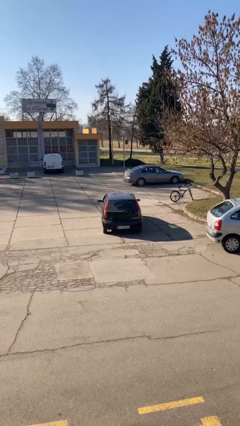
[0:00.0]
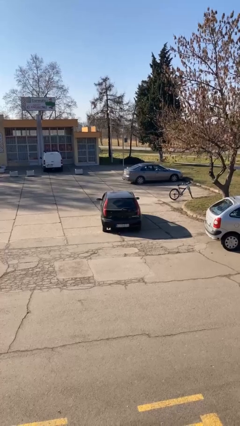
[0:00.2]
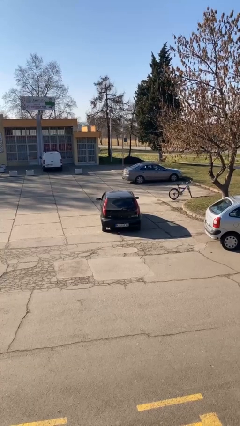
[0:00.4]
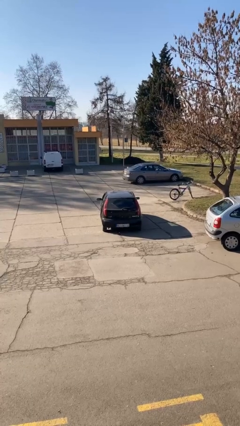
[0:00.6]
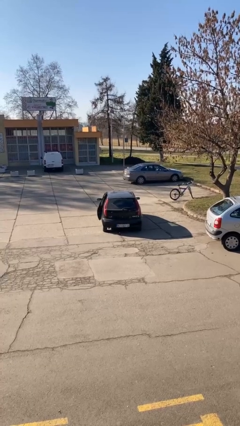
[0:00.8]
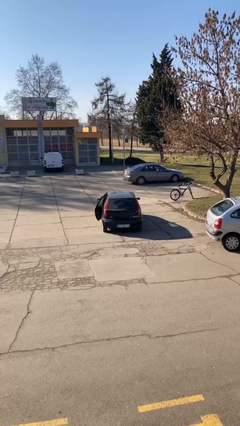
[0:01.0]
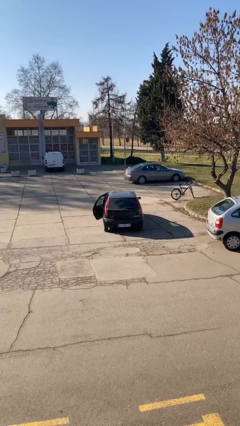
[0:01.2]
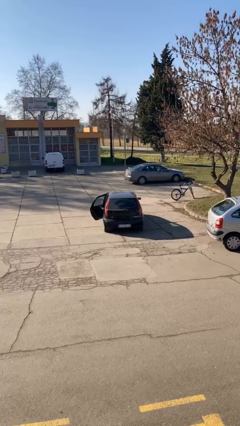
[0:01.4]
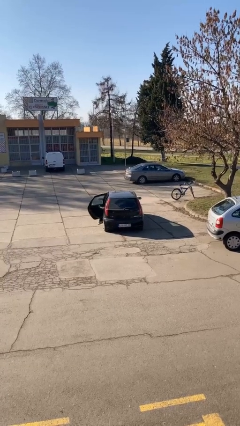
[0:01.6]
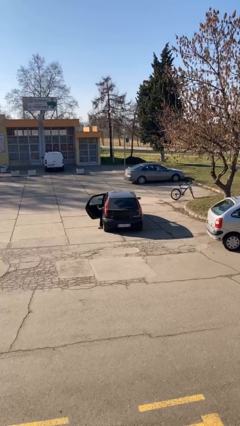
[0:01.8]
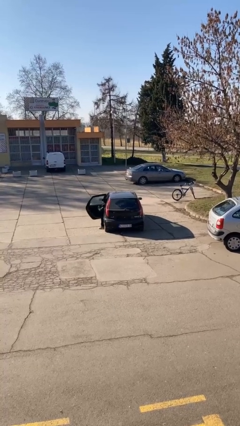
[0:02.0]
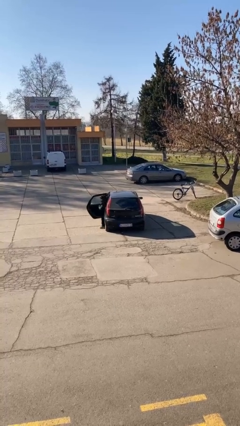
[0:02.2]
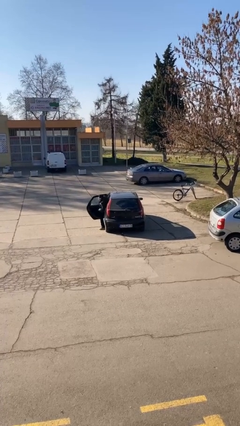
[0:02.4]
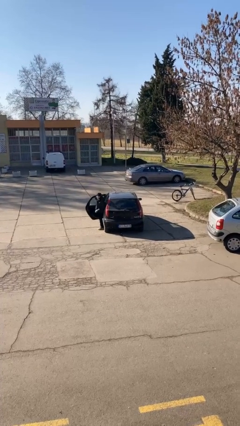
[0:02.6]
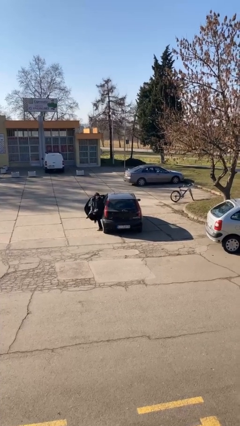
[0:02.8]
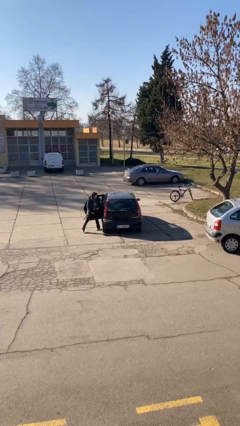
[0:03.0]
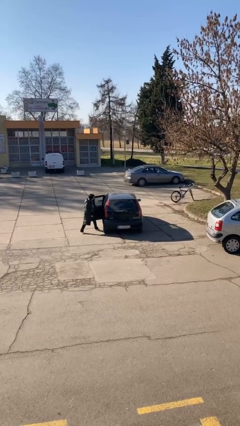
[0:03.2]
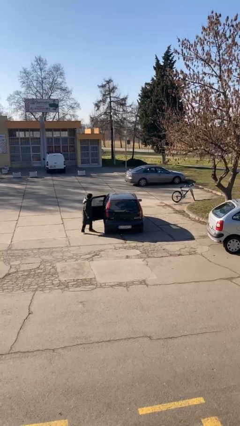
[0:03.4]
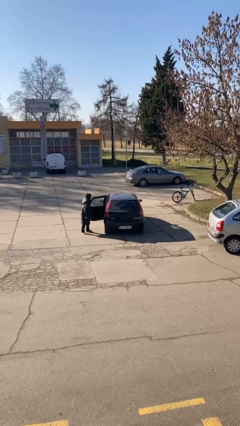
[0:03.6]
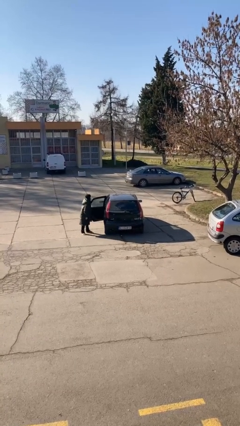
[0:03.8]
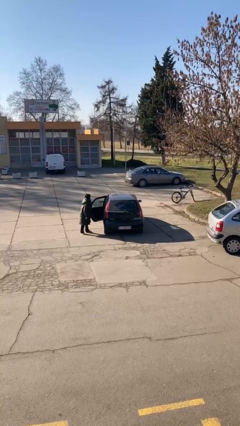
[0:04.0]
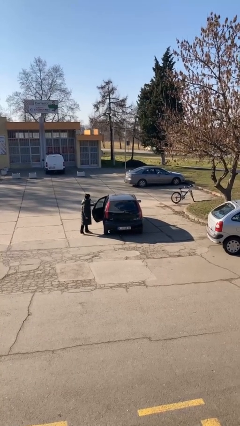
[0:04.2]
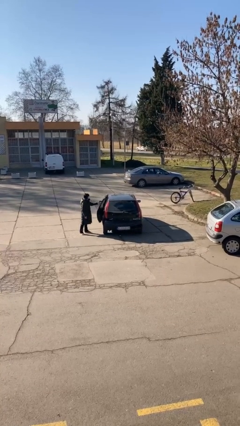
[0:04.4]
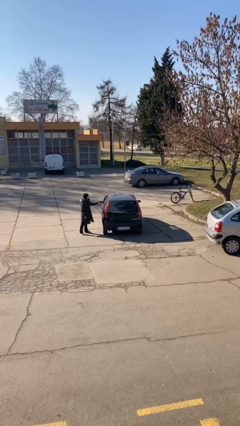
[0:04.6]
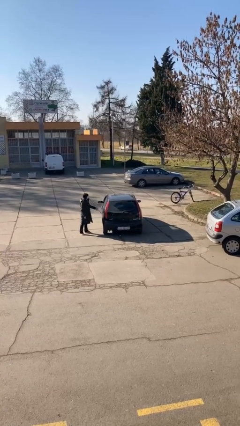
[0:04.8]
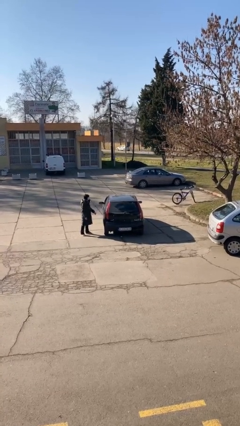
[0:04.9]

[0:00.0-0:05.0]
car drops off person

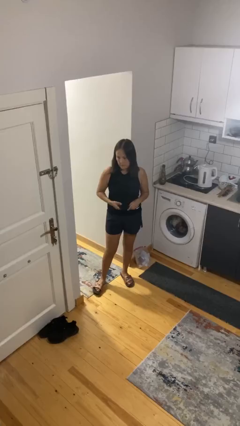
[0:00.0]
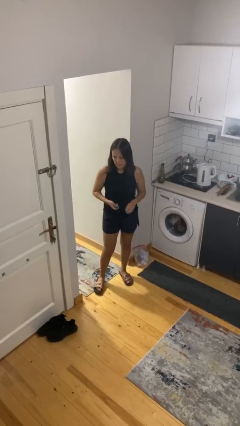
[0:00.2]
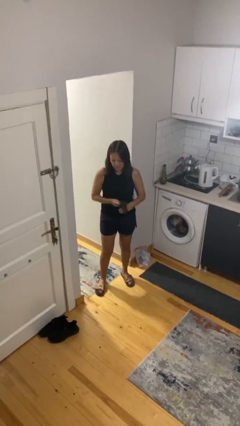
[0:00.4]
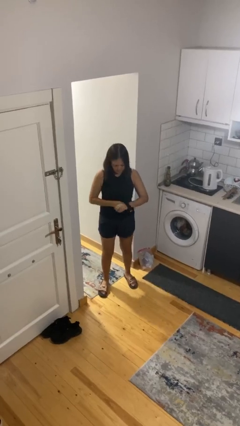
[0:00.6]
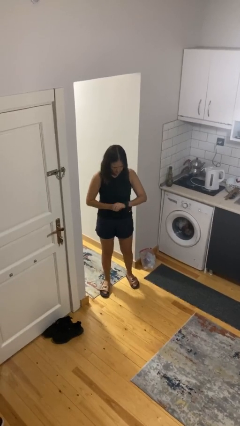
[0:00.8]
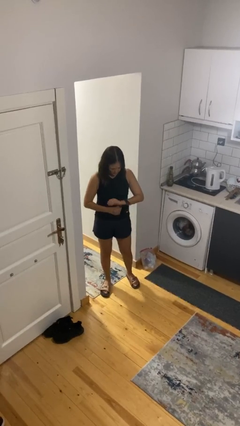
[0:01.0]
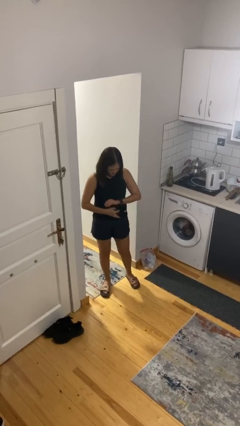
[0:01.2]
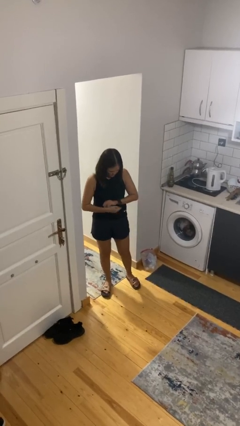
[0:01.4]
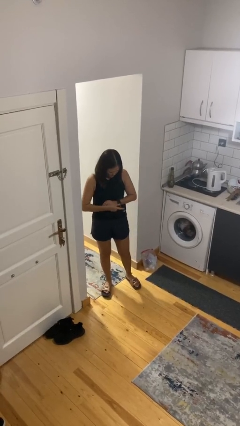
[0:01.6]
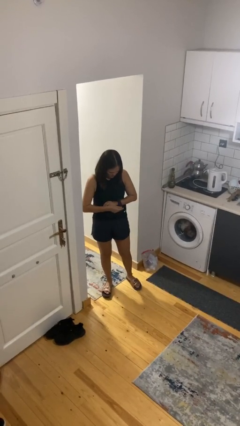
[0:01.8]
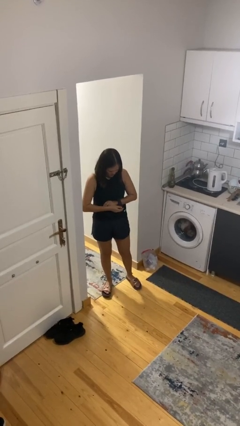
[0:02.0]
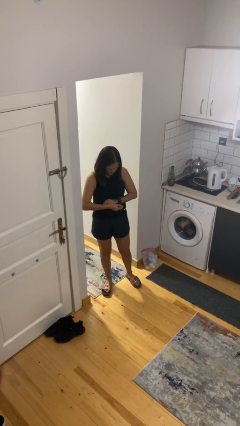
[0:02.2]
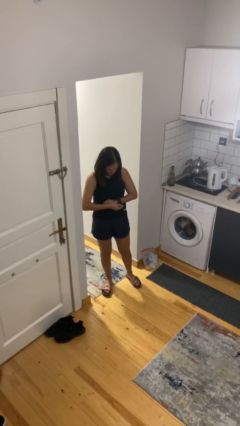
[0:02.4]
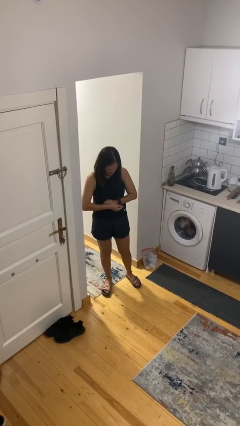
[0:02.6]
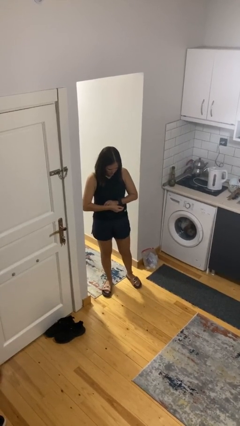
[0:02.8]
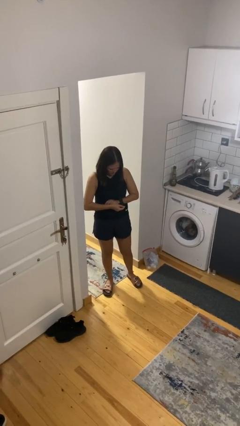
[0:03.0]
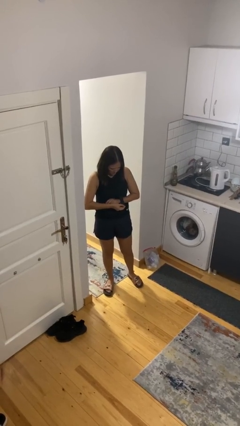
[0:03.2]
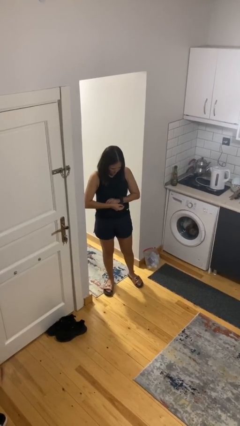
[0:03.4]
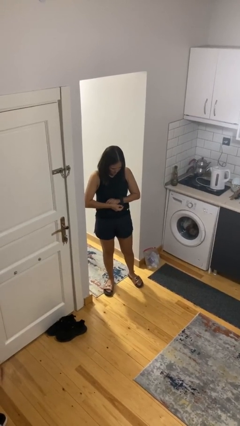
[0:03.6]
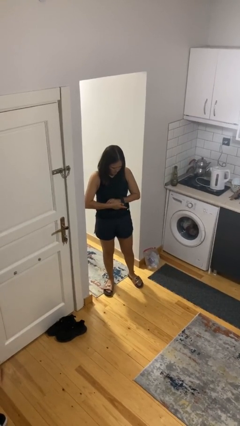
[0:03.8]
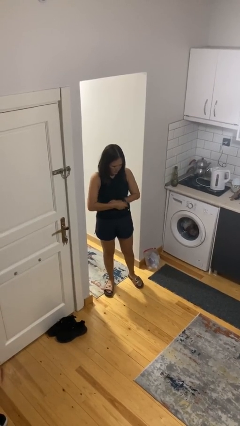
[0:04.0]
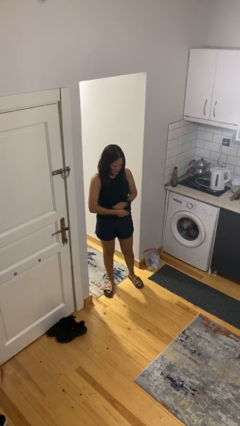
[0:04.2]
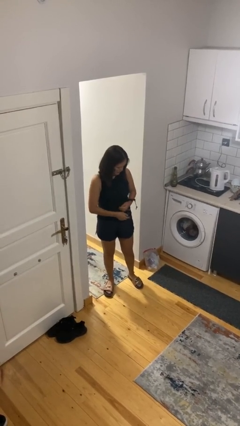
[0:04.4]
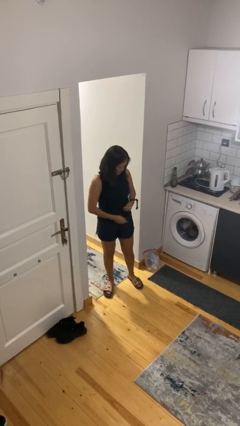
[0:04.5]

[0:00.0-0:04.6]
person puts on wristwatch

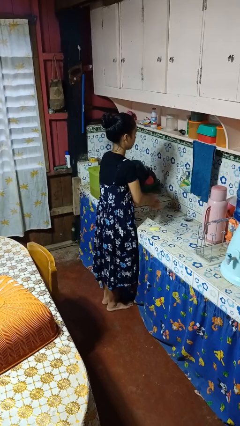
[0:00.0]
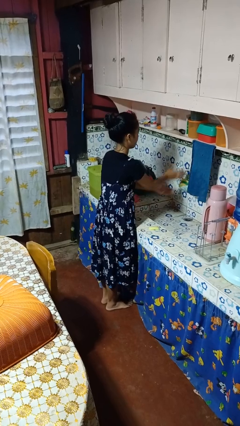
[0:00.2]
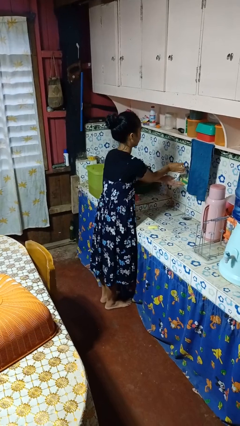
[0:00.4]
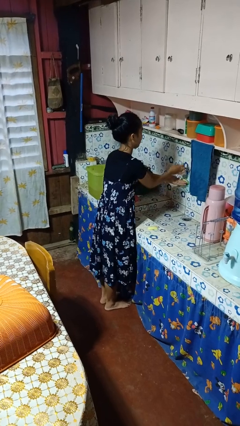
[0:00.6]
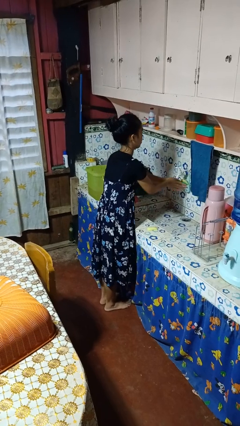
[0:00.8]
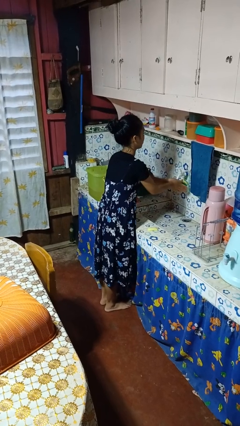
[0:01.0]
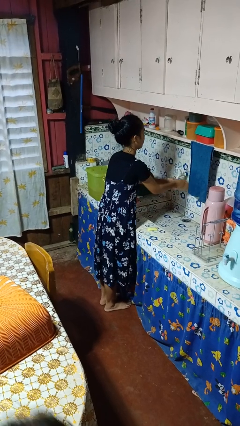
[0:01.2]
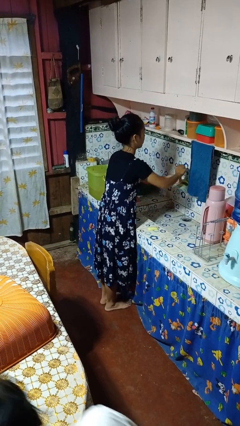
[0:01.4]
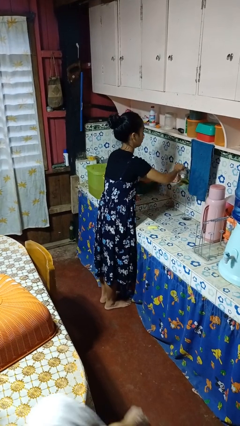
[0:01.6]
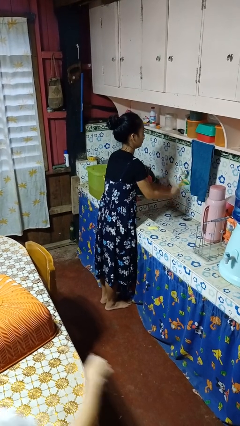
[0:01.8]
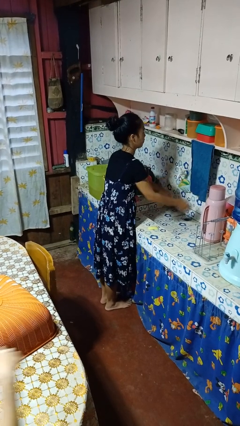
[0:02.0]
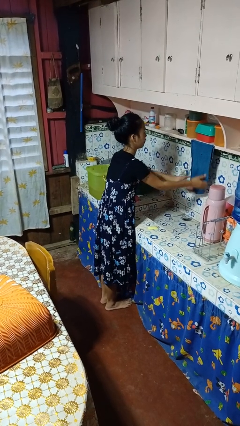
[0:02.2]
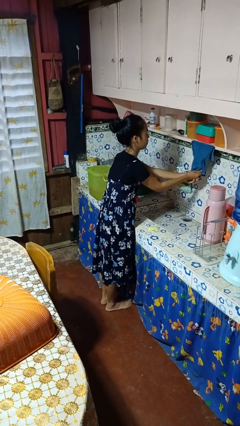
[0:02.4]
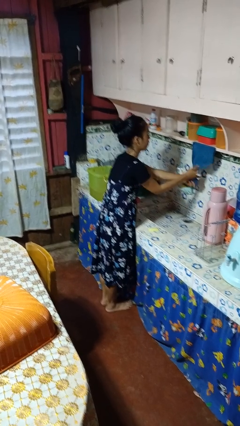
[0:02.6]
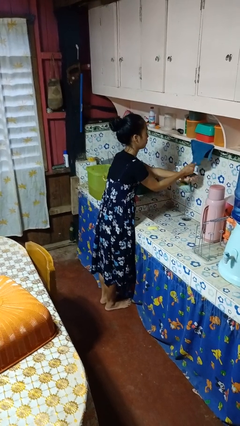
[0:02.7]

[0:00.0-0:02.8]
person washes hands

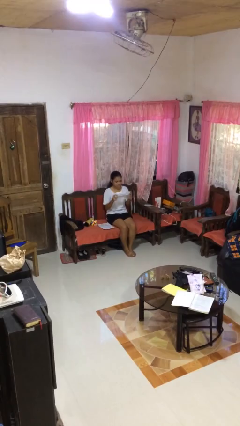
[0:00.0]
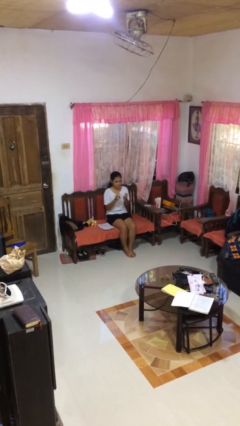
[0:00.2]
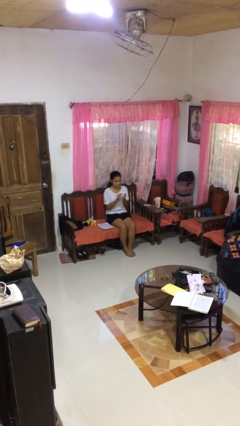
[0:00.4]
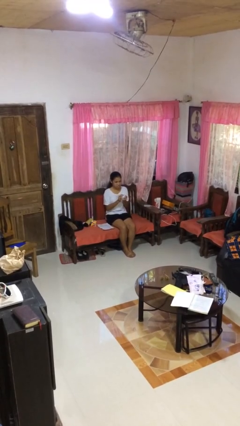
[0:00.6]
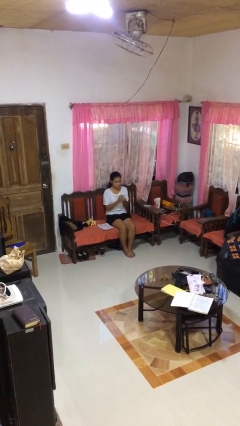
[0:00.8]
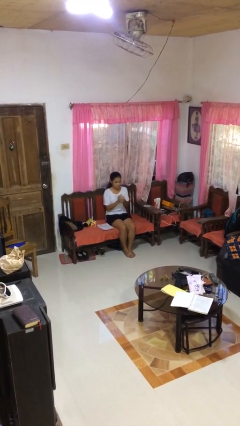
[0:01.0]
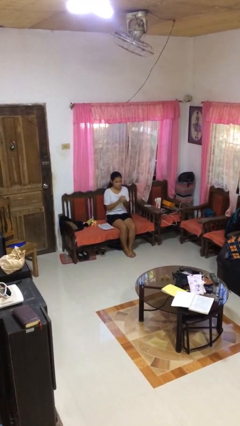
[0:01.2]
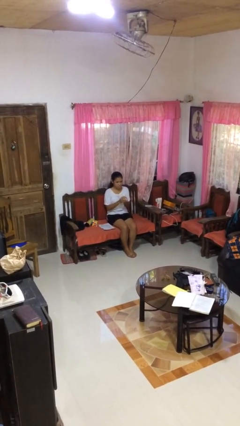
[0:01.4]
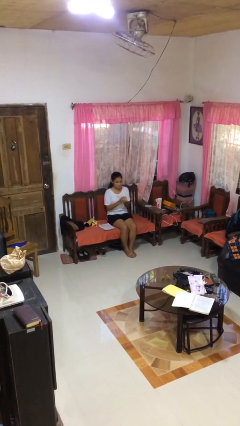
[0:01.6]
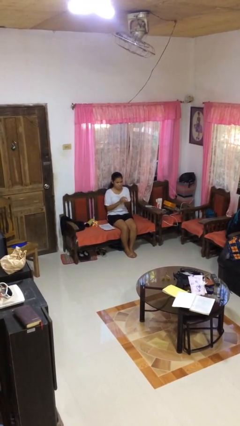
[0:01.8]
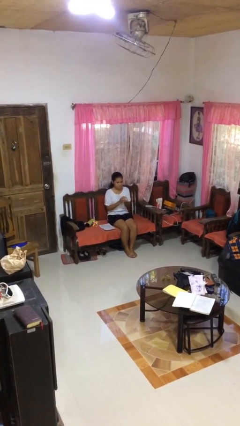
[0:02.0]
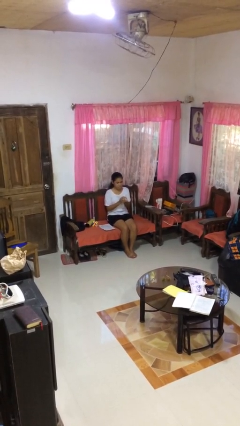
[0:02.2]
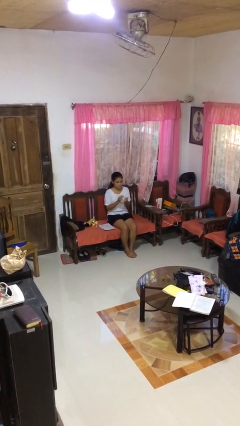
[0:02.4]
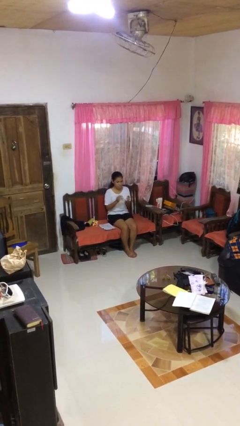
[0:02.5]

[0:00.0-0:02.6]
person crumples paper

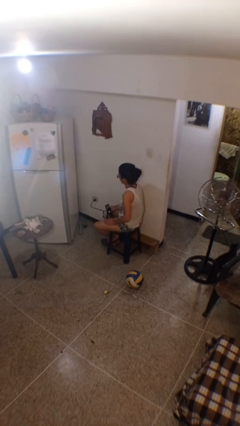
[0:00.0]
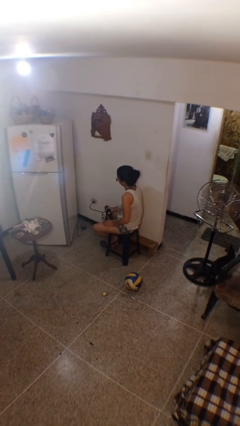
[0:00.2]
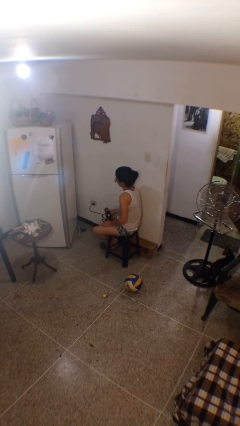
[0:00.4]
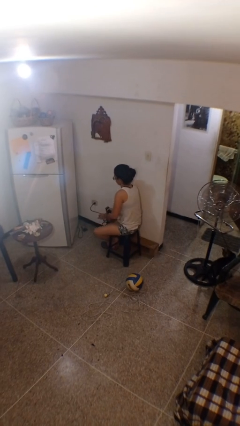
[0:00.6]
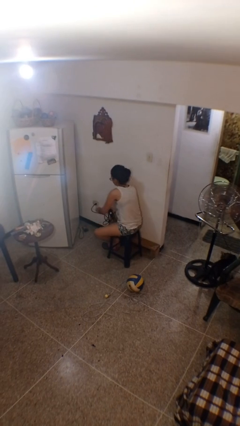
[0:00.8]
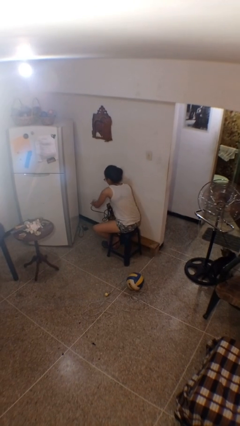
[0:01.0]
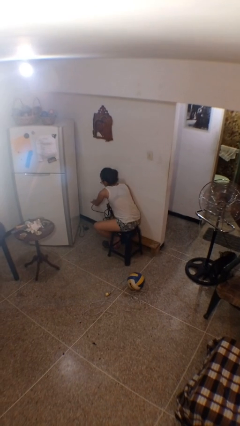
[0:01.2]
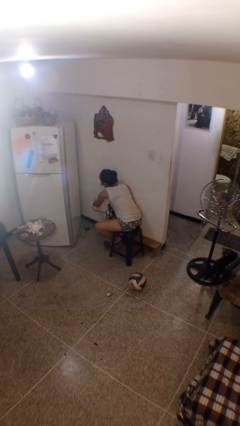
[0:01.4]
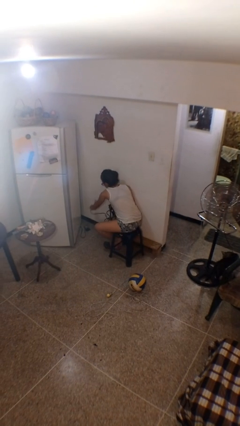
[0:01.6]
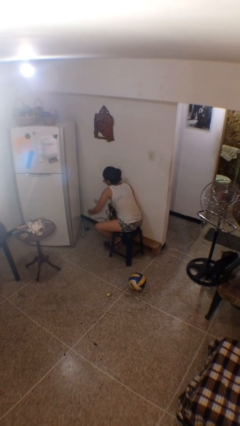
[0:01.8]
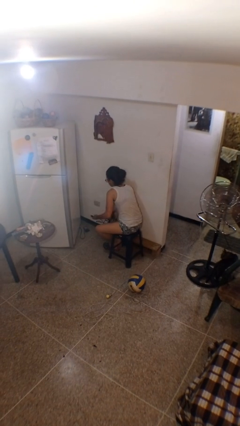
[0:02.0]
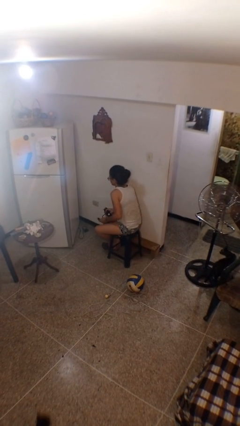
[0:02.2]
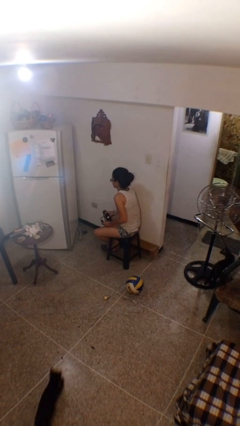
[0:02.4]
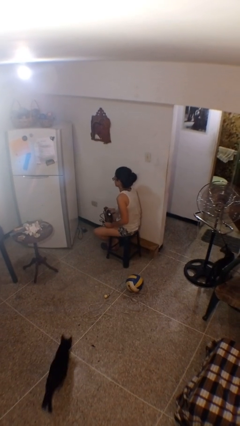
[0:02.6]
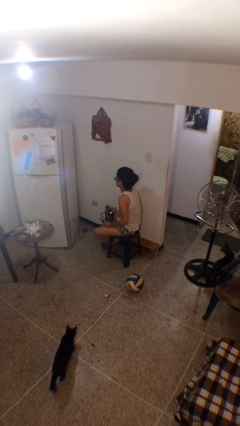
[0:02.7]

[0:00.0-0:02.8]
person unplugs from electrical socket
